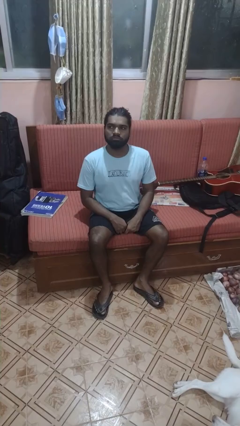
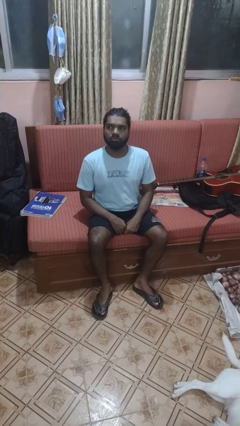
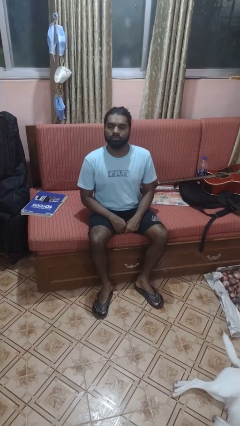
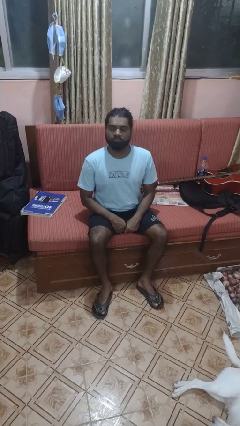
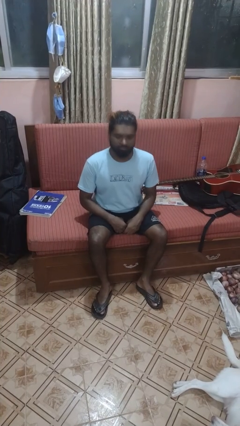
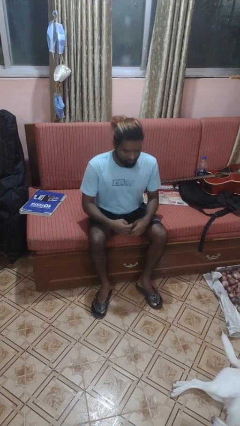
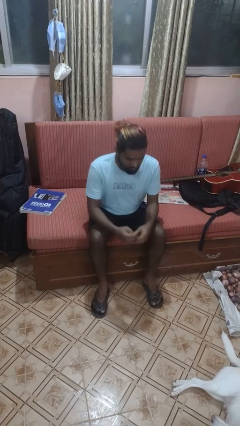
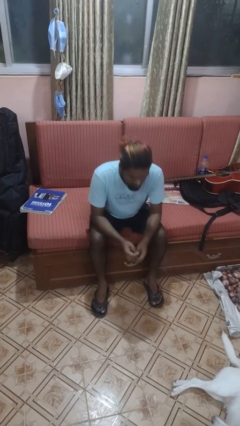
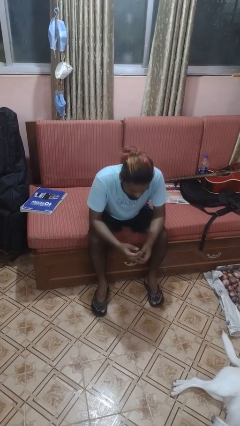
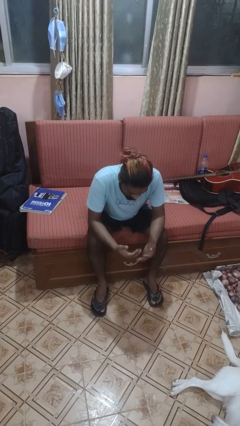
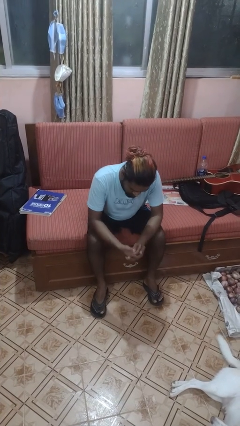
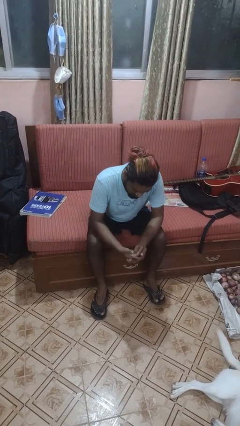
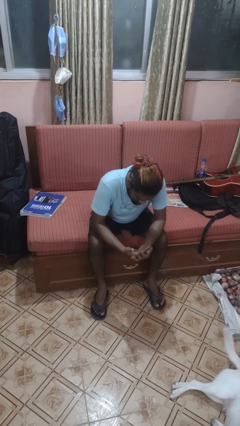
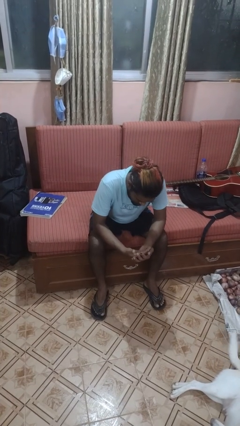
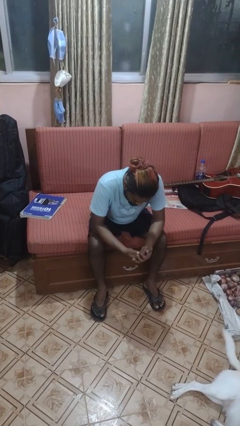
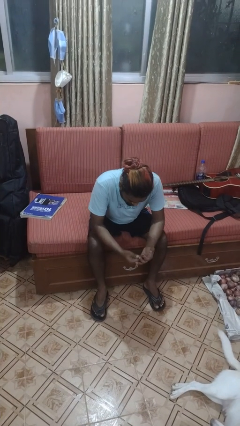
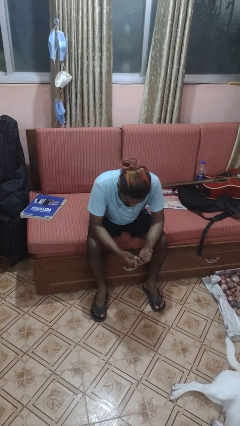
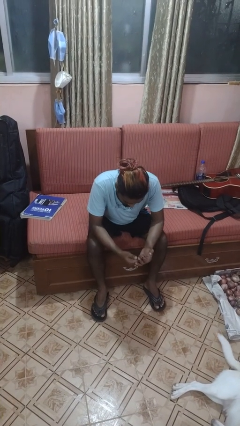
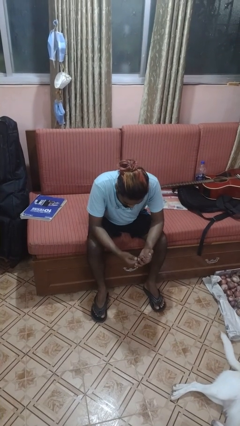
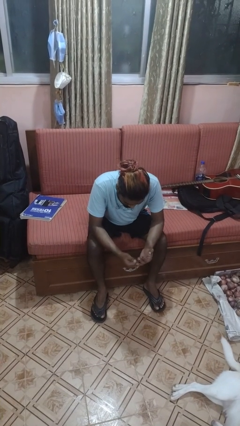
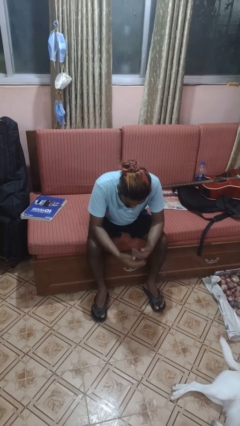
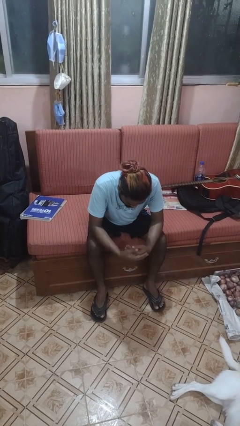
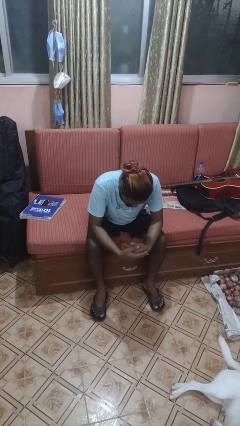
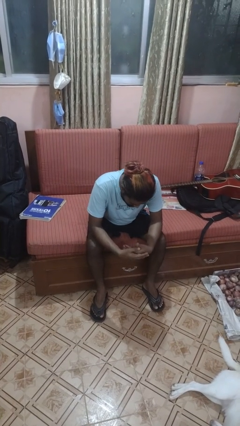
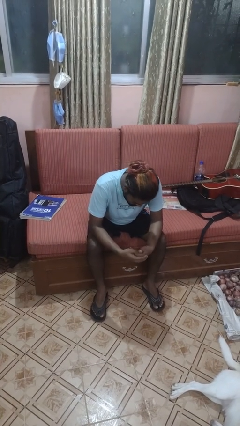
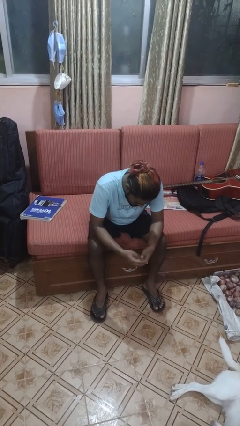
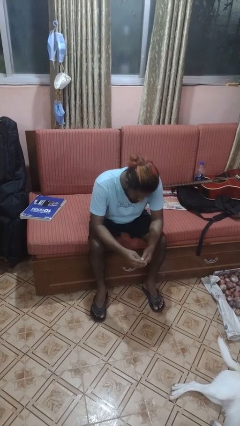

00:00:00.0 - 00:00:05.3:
person looks at hands in lap

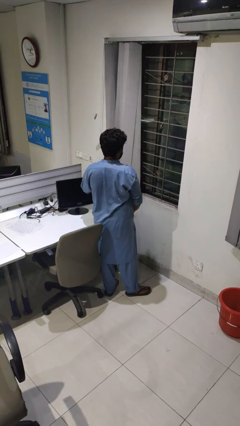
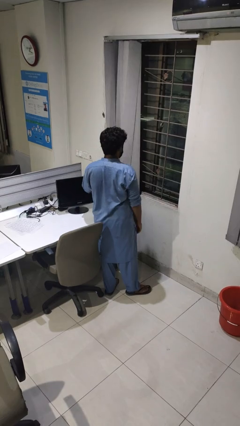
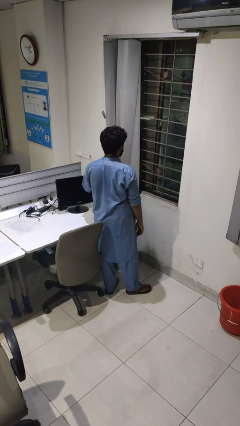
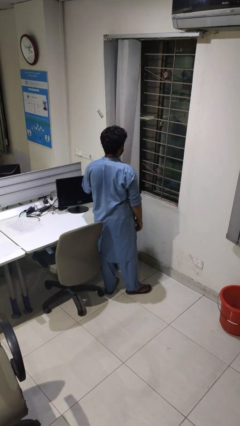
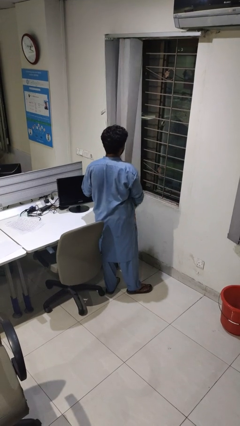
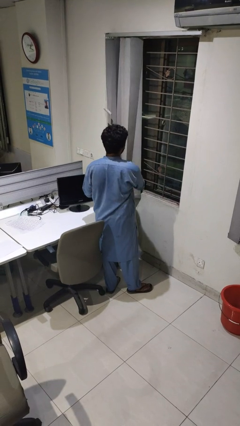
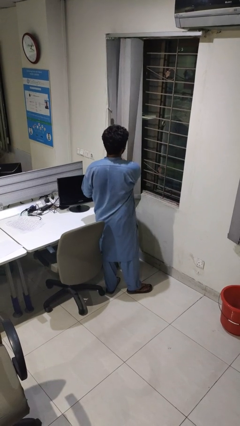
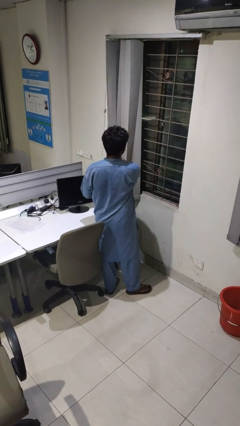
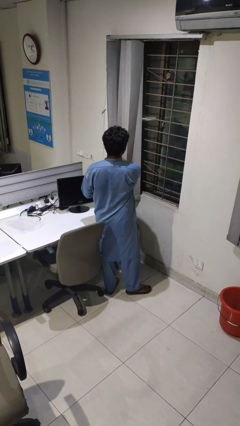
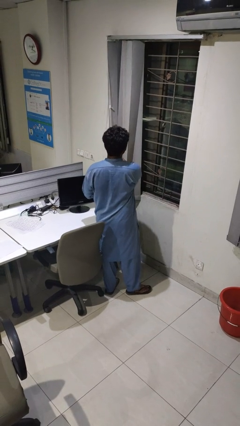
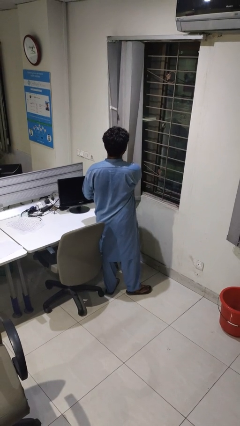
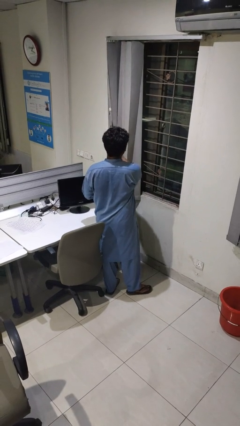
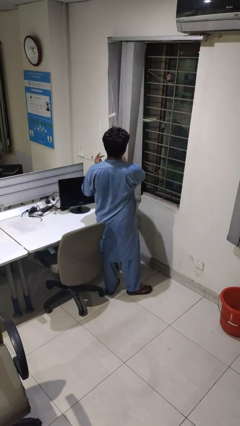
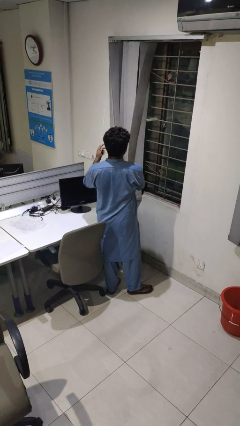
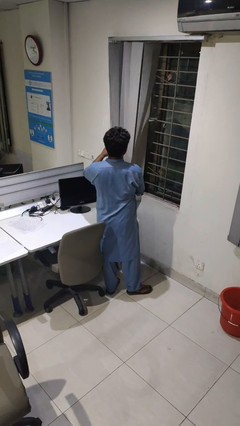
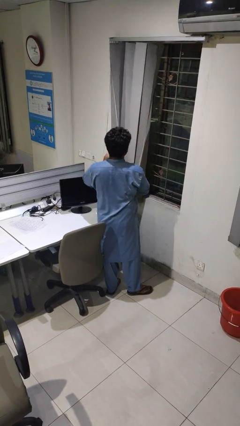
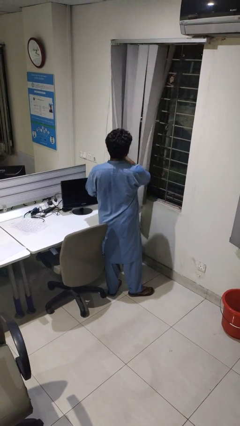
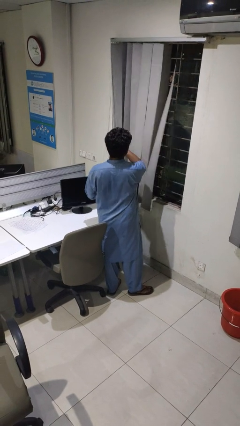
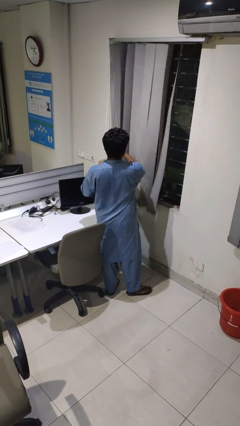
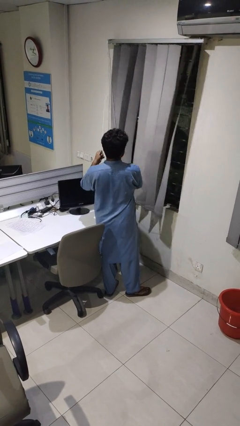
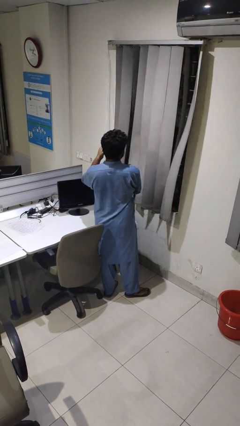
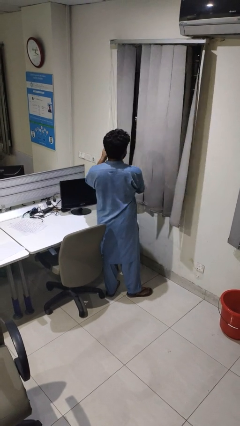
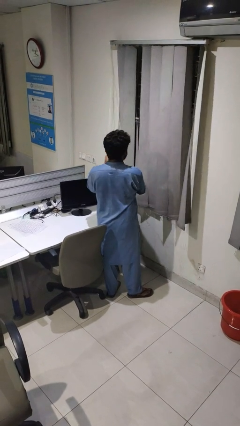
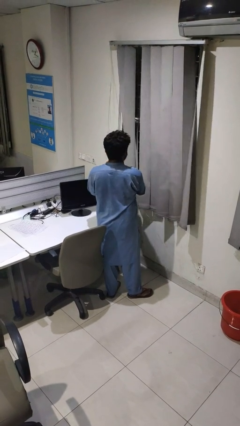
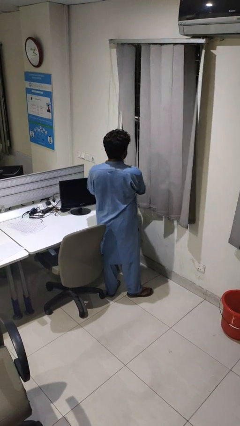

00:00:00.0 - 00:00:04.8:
person closes curtains

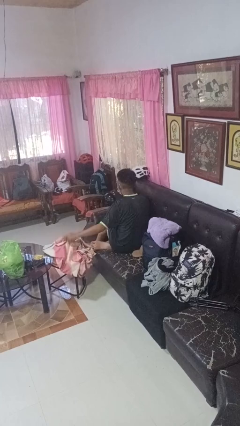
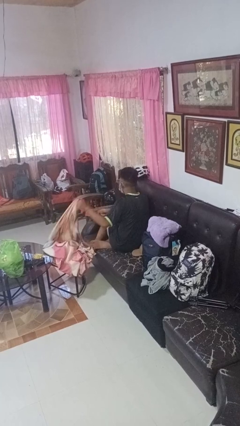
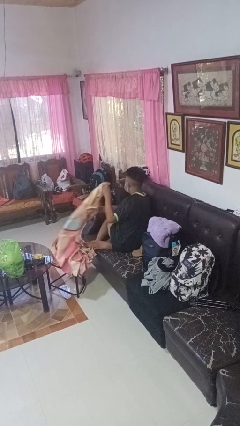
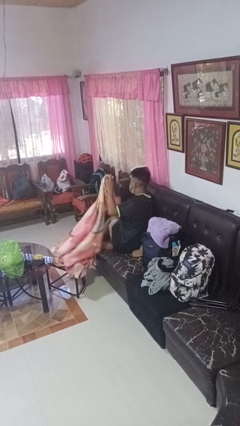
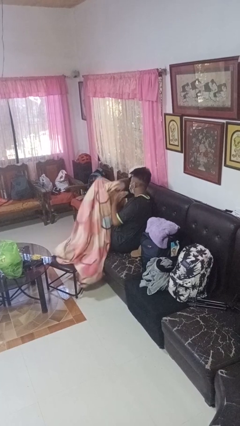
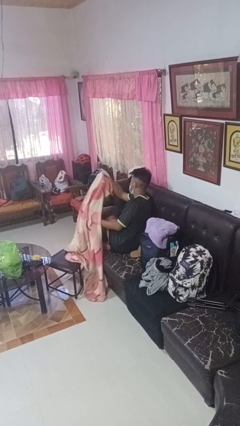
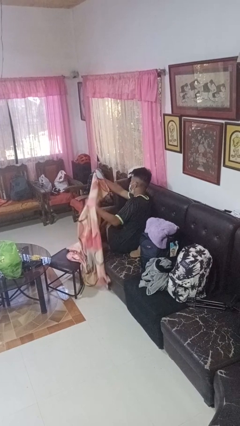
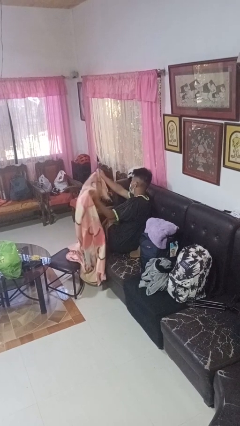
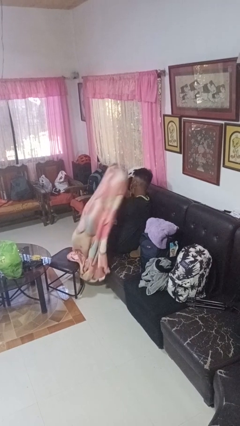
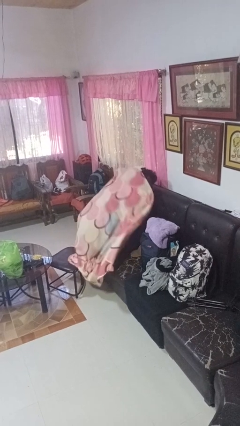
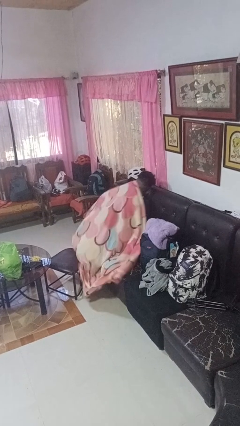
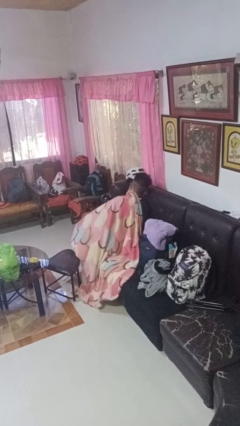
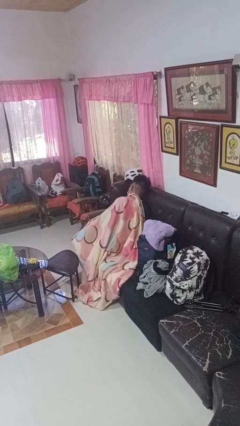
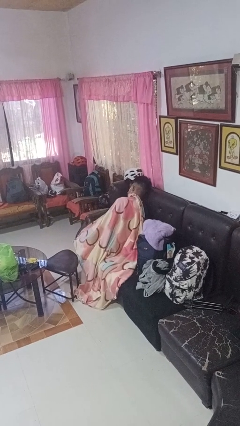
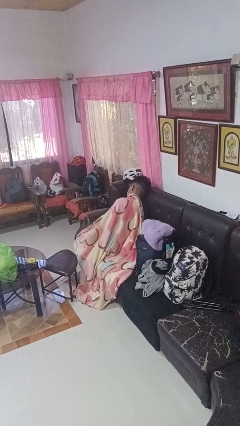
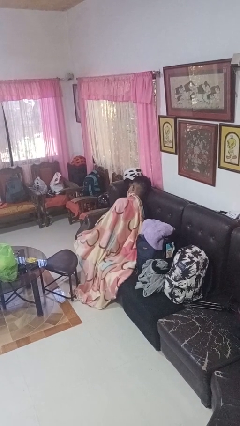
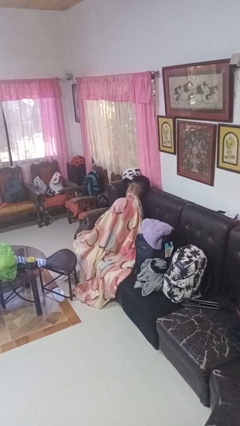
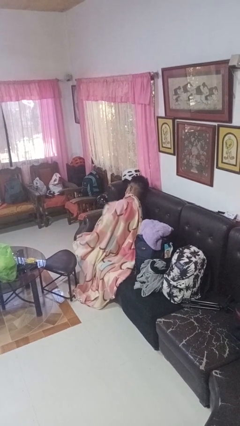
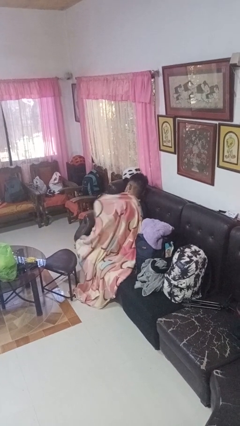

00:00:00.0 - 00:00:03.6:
person covers with blanket

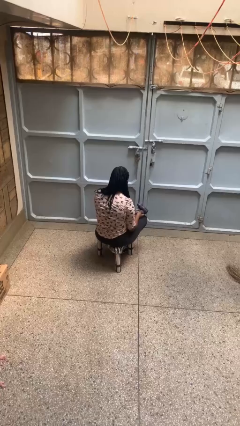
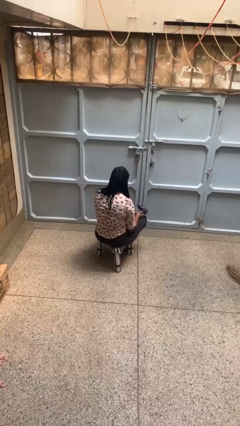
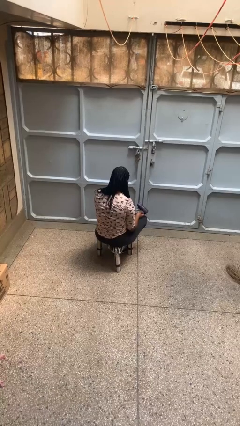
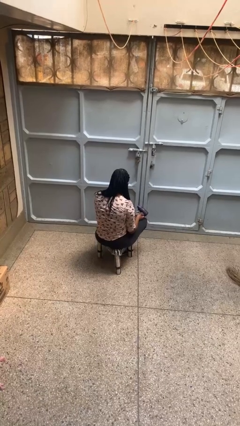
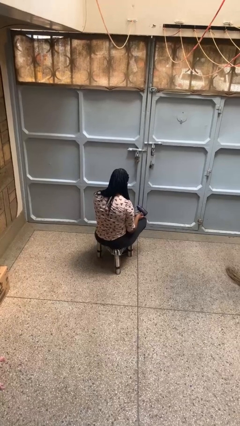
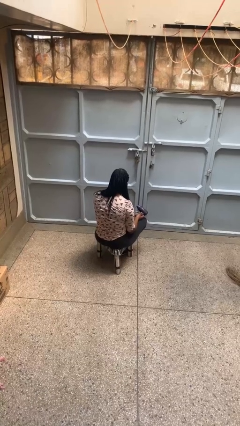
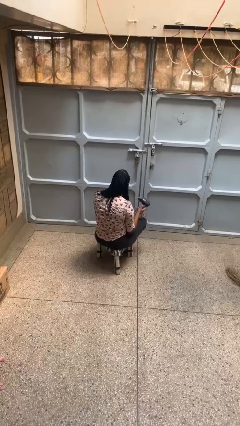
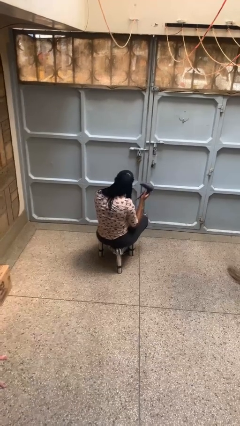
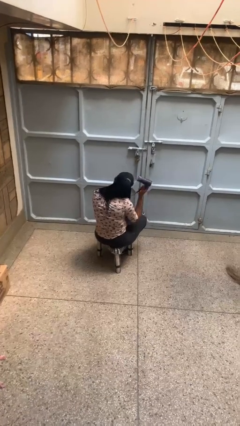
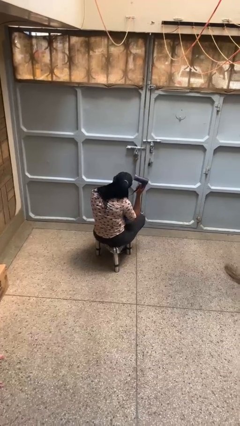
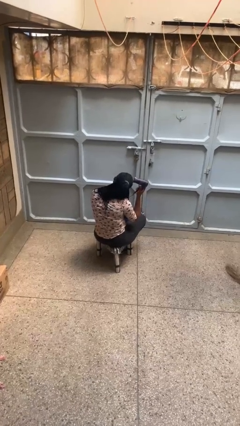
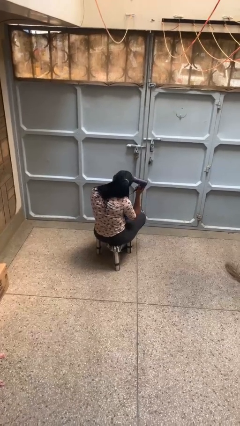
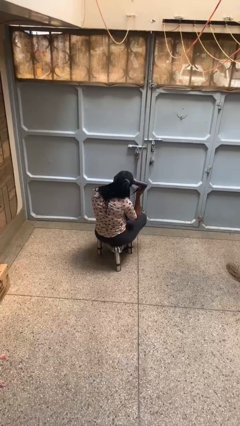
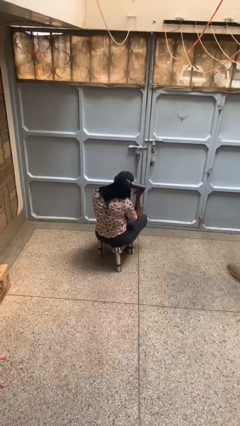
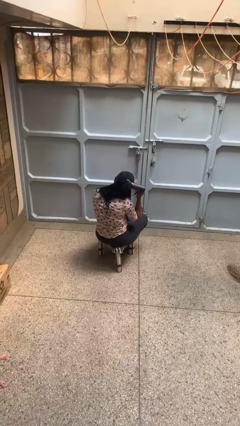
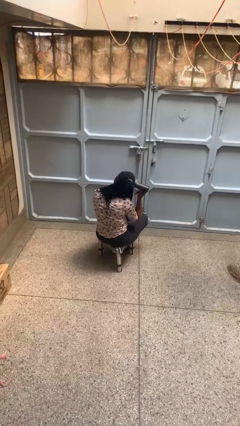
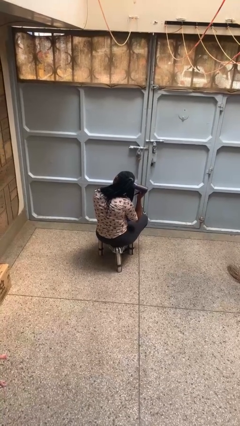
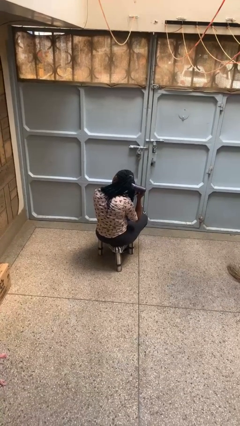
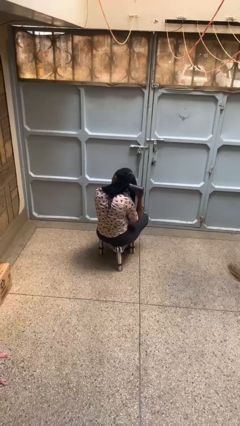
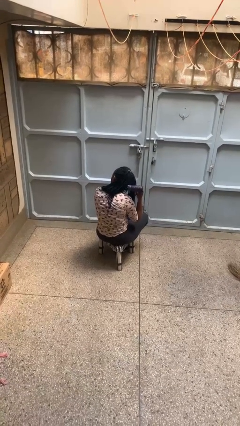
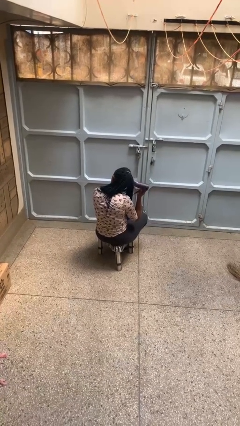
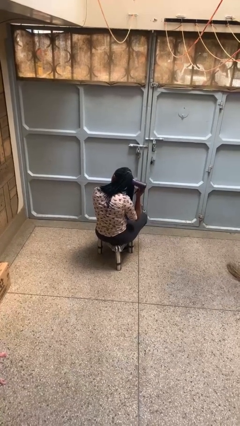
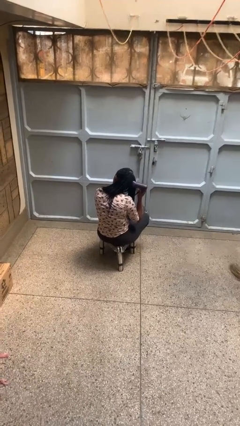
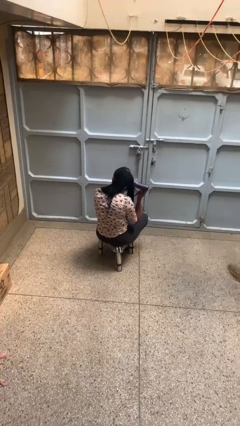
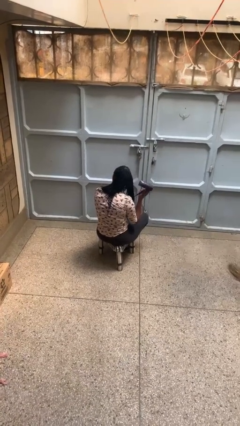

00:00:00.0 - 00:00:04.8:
person dries hair with hairdryer
